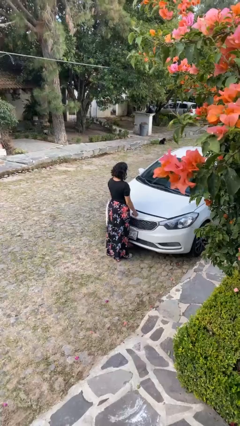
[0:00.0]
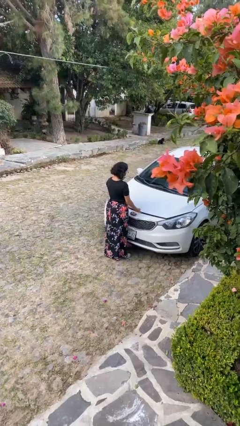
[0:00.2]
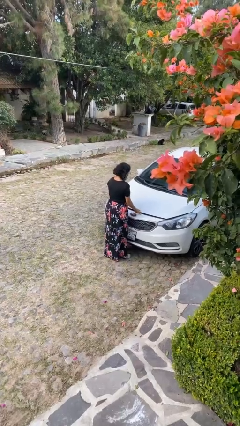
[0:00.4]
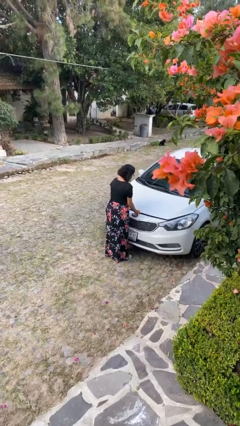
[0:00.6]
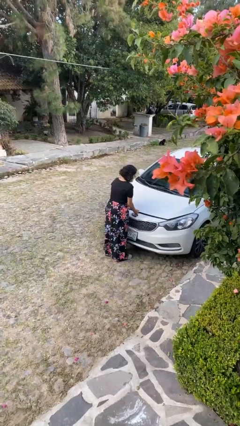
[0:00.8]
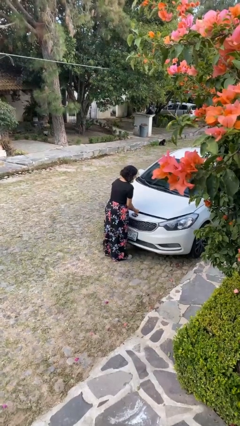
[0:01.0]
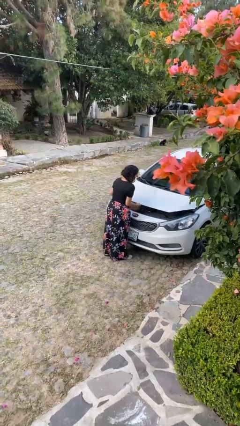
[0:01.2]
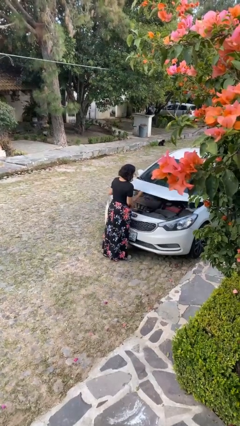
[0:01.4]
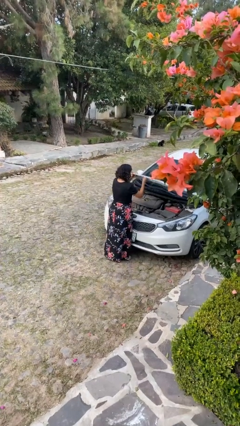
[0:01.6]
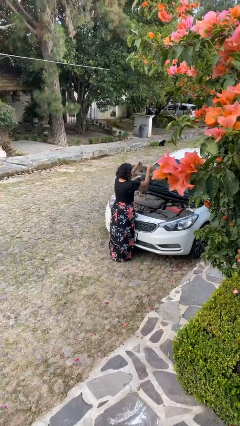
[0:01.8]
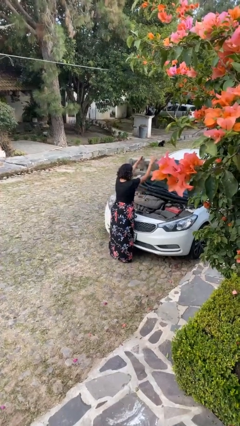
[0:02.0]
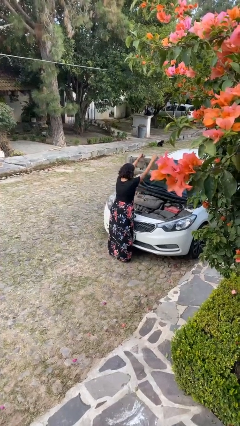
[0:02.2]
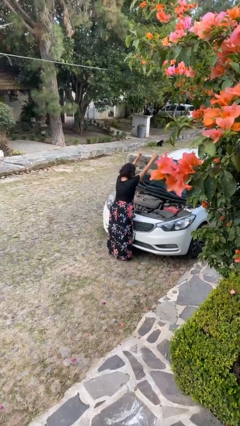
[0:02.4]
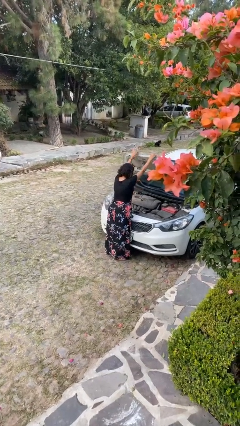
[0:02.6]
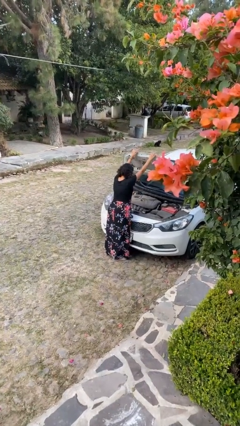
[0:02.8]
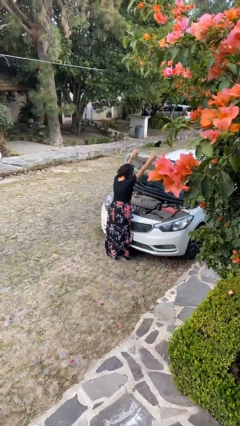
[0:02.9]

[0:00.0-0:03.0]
person opens car hood

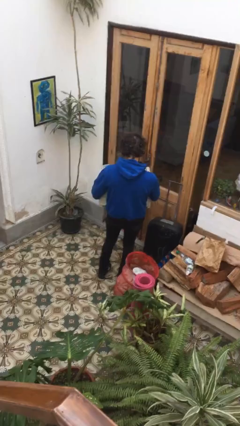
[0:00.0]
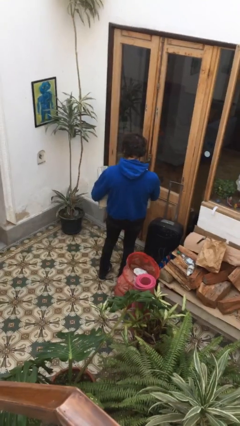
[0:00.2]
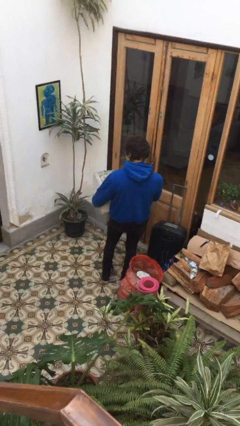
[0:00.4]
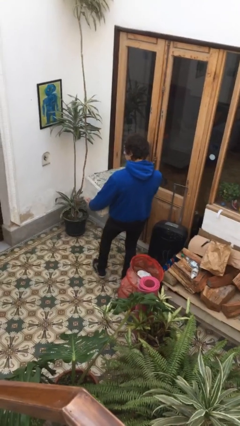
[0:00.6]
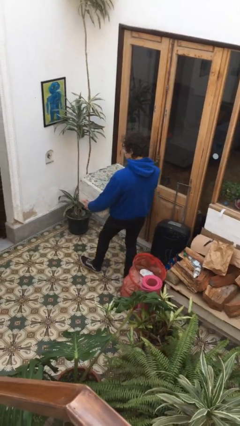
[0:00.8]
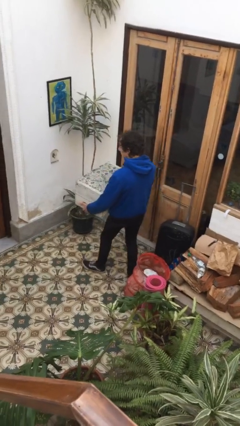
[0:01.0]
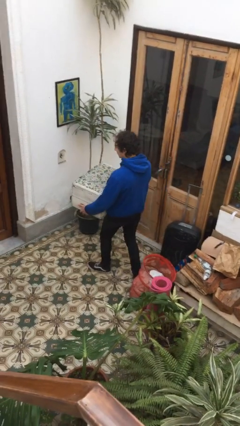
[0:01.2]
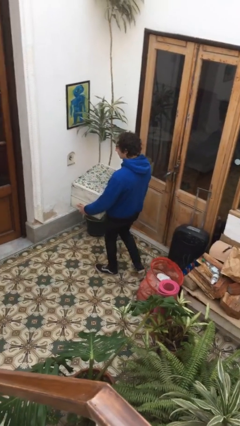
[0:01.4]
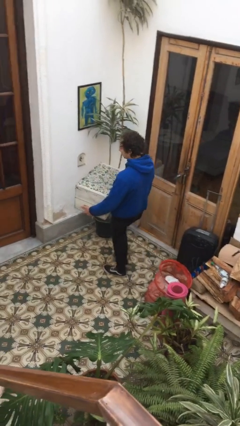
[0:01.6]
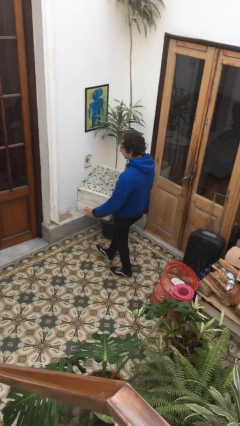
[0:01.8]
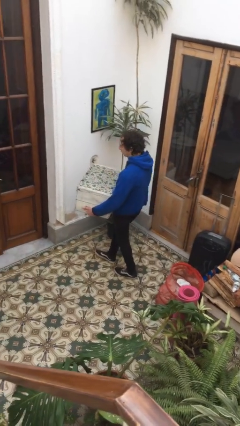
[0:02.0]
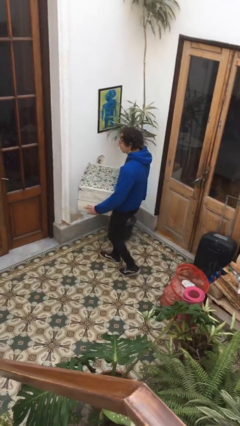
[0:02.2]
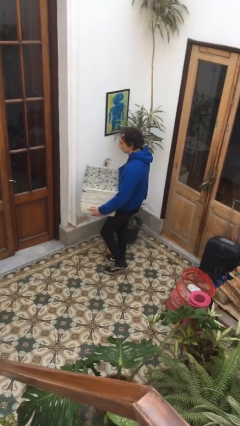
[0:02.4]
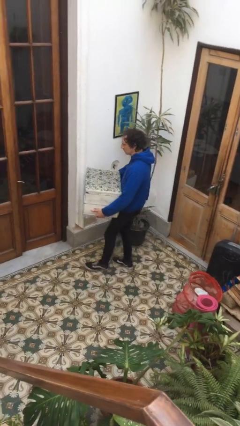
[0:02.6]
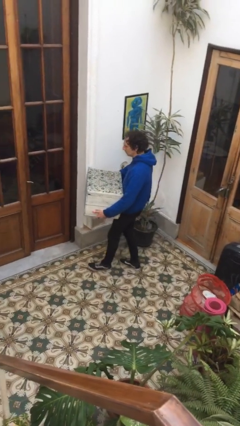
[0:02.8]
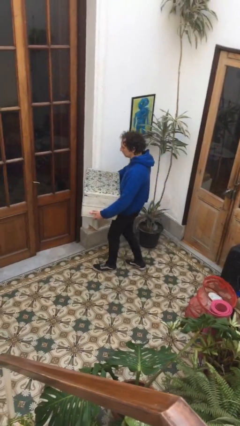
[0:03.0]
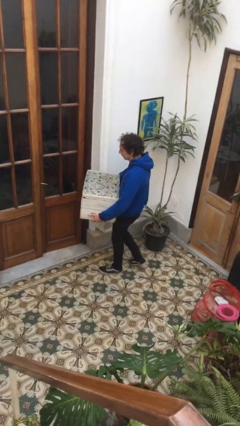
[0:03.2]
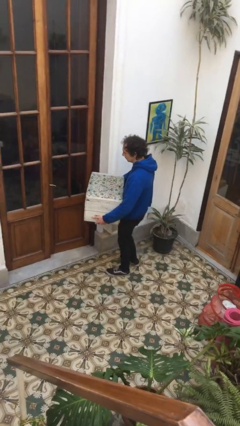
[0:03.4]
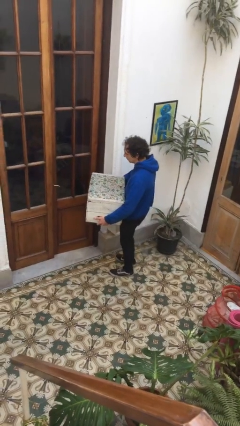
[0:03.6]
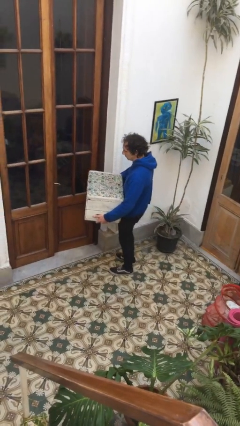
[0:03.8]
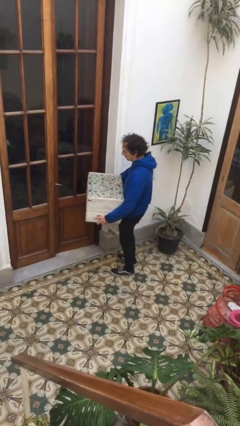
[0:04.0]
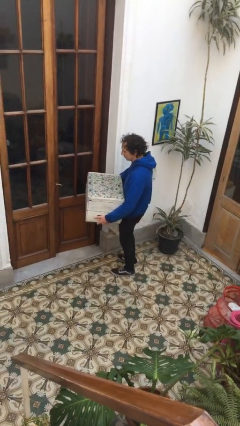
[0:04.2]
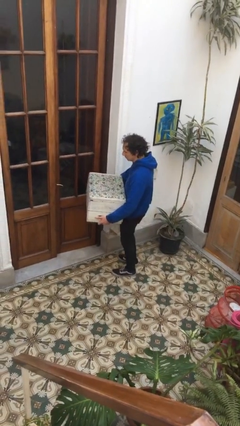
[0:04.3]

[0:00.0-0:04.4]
person carries furniture

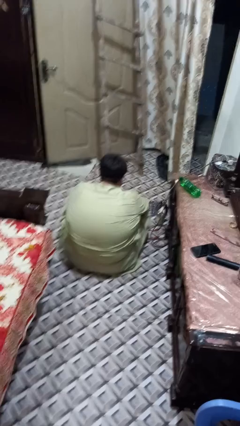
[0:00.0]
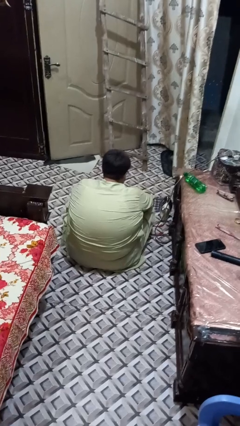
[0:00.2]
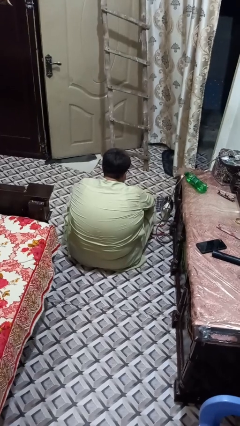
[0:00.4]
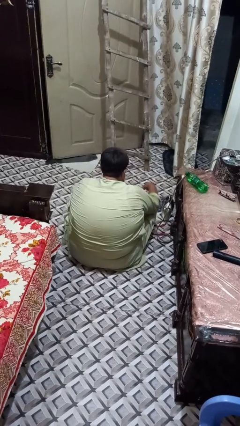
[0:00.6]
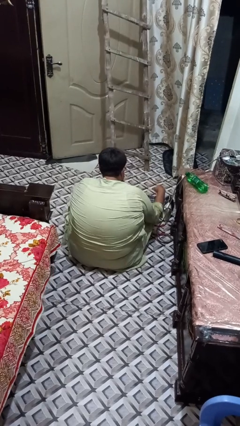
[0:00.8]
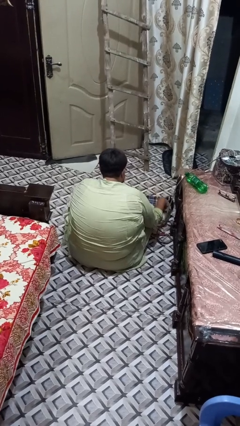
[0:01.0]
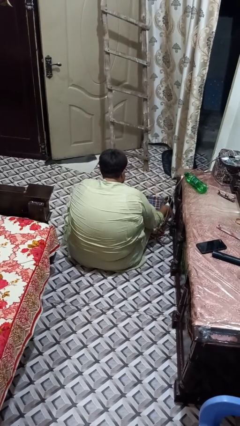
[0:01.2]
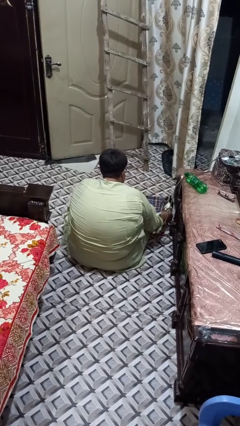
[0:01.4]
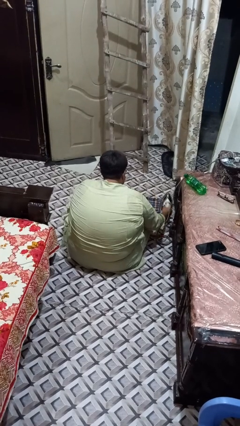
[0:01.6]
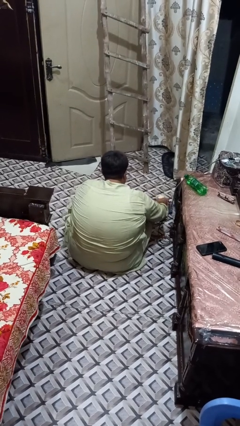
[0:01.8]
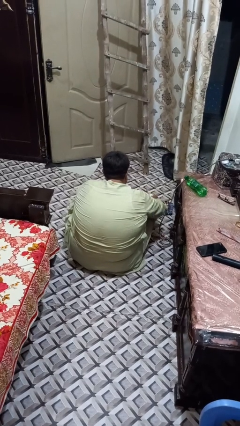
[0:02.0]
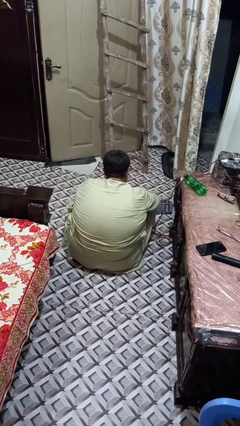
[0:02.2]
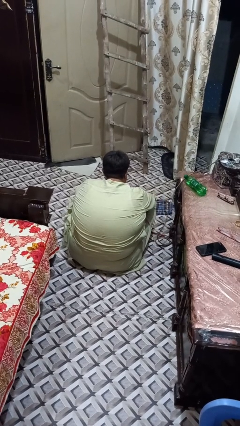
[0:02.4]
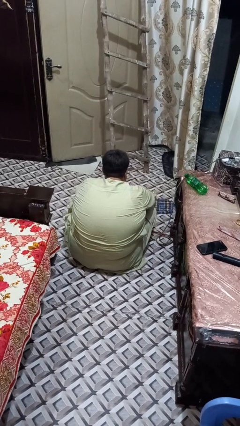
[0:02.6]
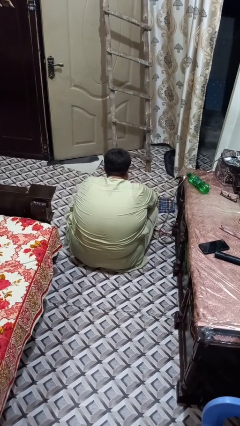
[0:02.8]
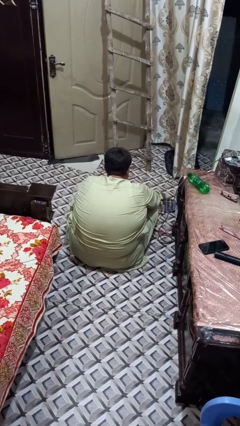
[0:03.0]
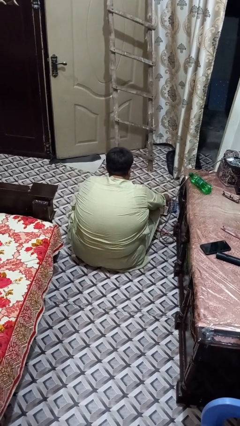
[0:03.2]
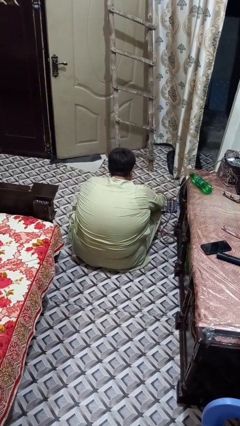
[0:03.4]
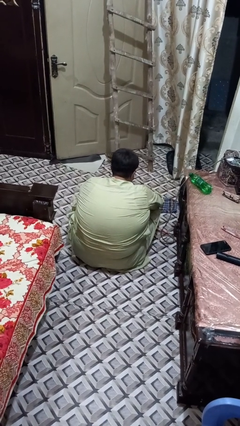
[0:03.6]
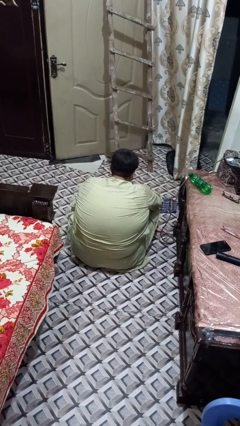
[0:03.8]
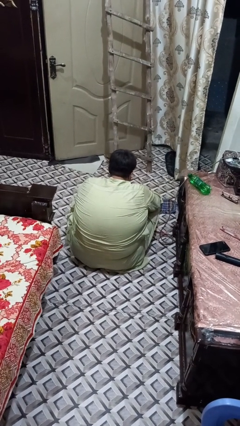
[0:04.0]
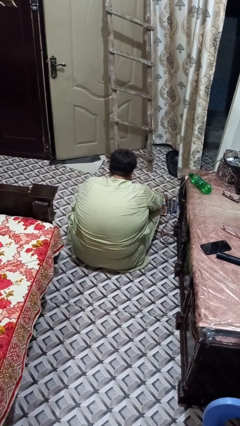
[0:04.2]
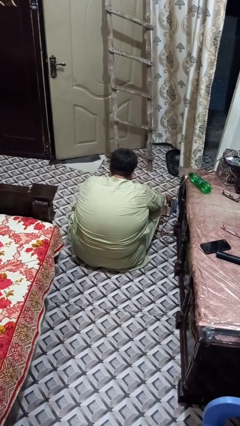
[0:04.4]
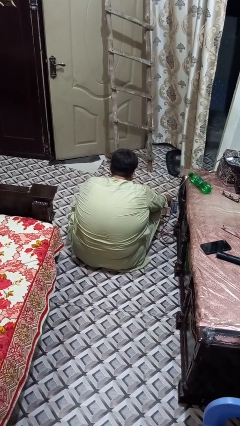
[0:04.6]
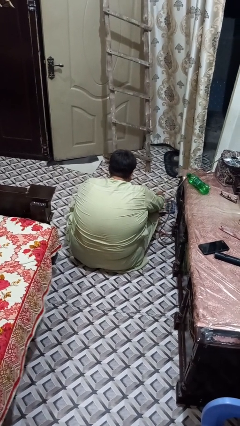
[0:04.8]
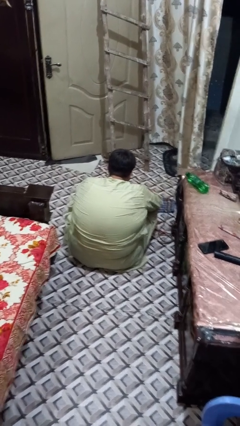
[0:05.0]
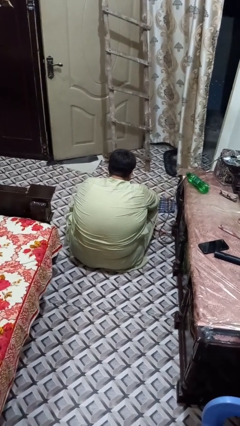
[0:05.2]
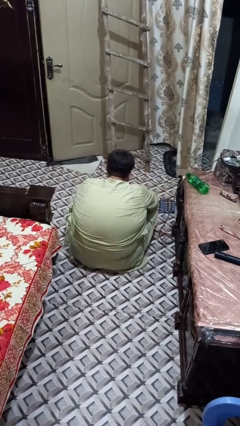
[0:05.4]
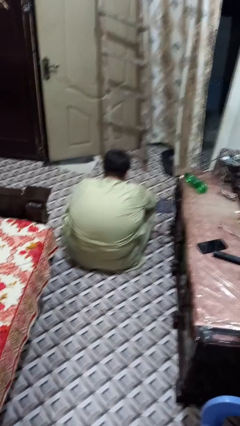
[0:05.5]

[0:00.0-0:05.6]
person irons clothes

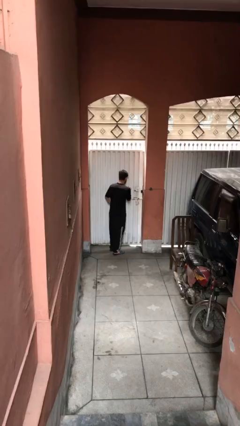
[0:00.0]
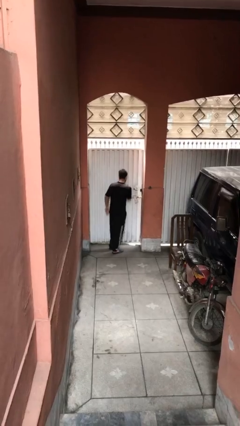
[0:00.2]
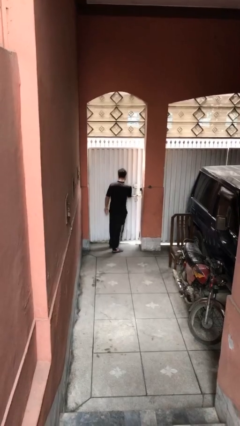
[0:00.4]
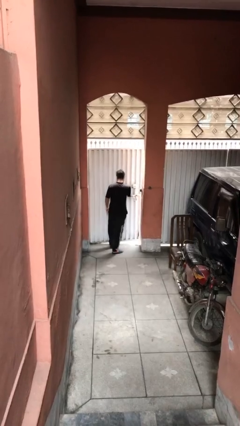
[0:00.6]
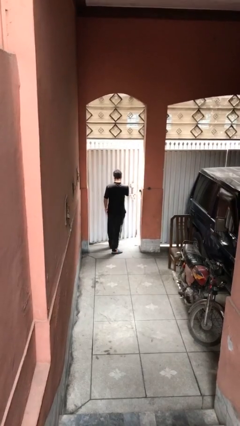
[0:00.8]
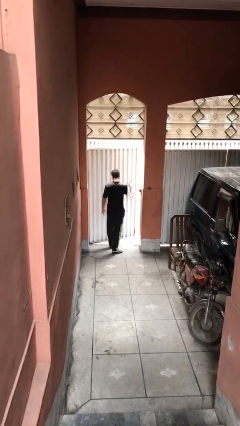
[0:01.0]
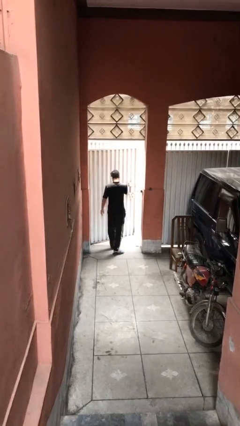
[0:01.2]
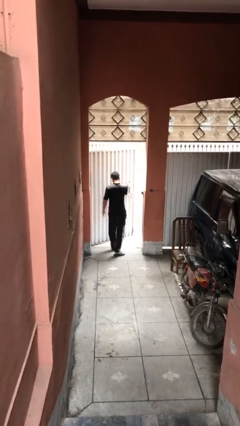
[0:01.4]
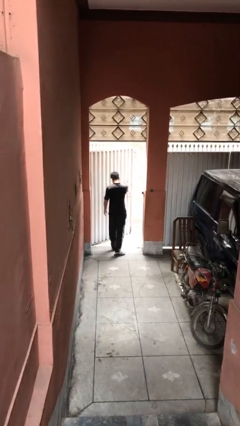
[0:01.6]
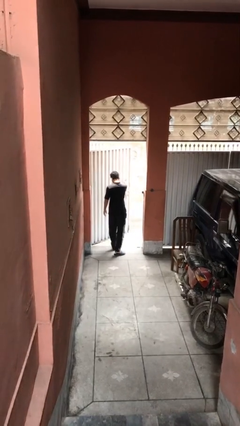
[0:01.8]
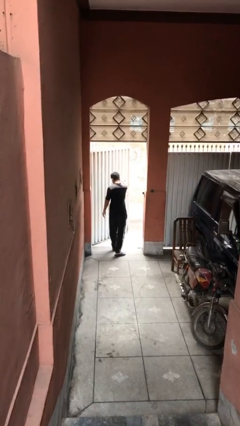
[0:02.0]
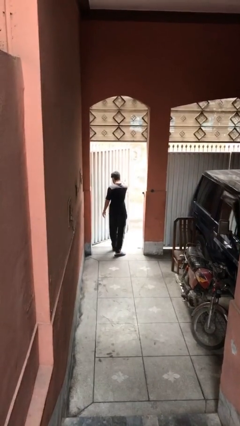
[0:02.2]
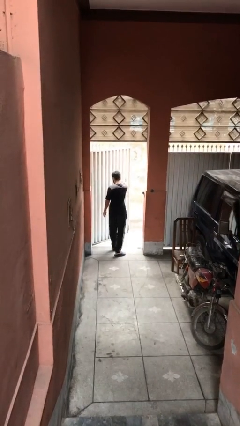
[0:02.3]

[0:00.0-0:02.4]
person opens facility door

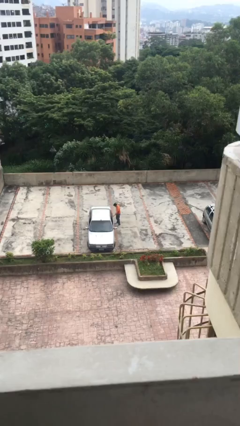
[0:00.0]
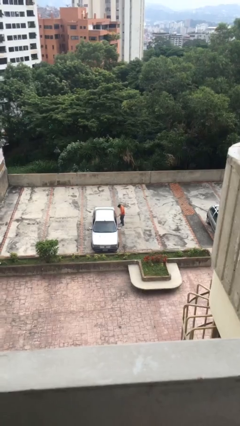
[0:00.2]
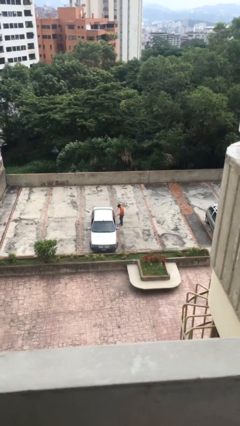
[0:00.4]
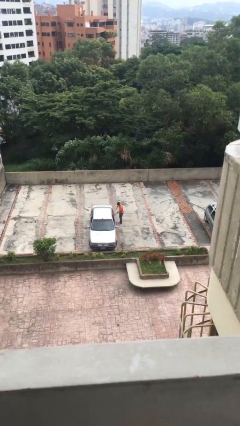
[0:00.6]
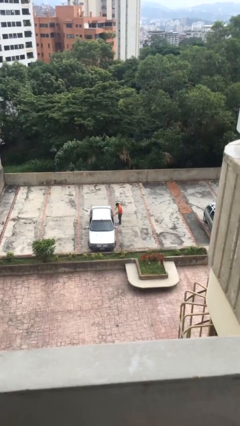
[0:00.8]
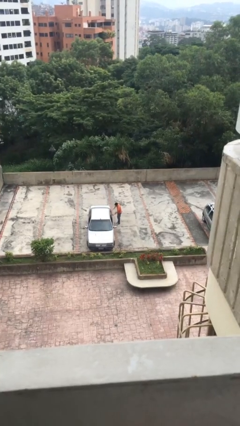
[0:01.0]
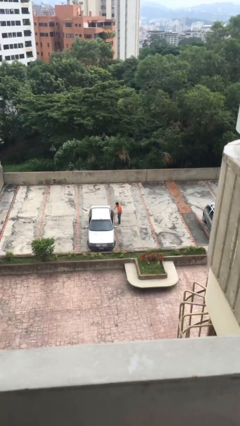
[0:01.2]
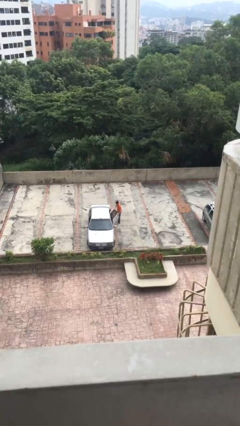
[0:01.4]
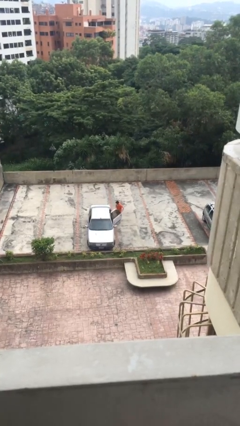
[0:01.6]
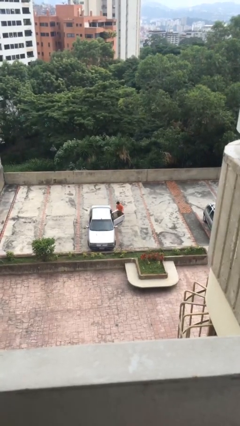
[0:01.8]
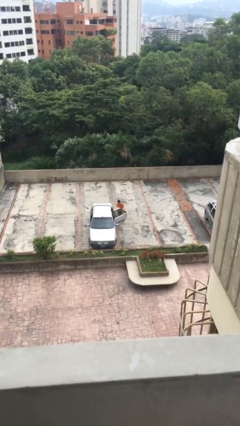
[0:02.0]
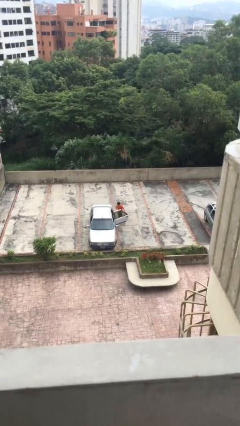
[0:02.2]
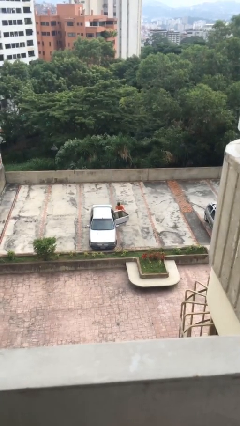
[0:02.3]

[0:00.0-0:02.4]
person opens car door

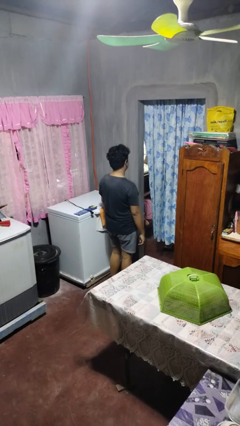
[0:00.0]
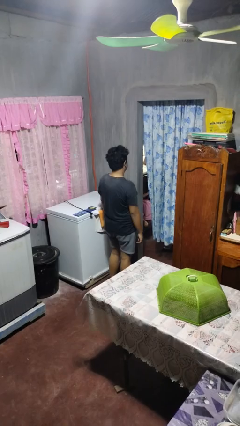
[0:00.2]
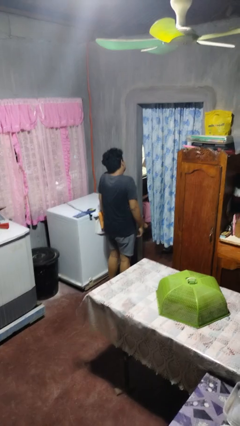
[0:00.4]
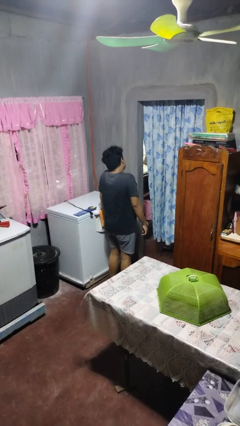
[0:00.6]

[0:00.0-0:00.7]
person shrugs
